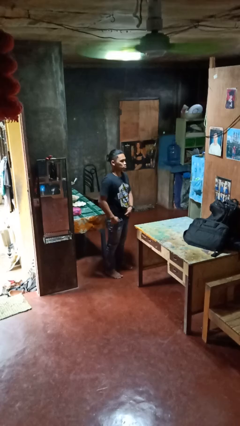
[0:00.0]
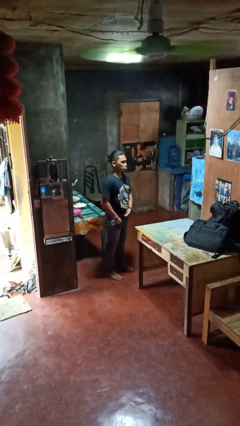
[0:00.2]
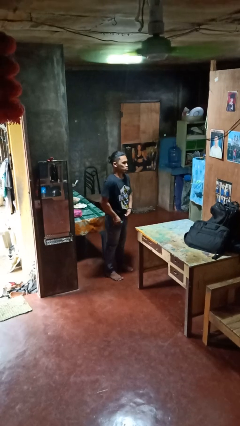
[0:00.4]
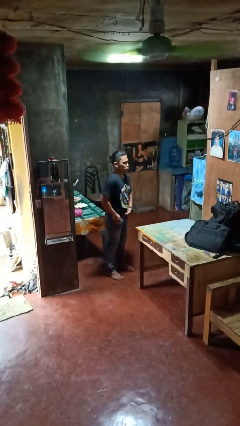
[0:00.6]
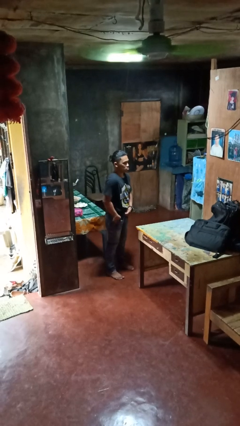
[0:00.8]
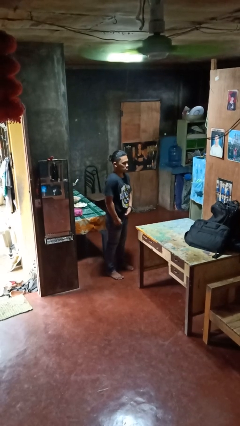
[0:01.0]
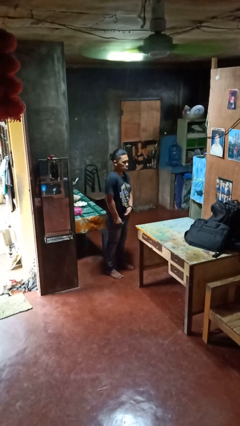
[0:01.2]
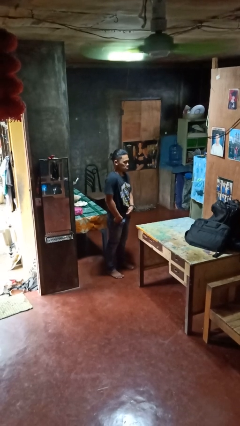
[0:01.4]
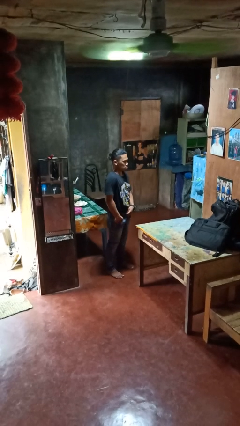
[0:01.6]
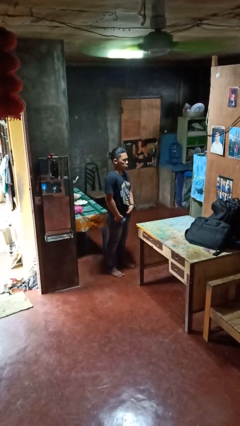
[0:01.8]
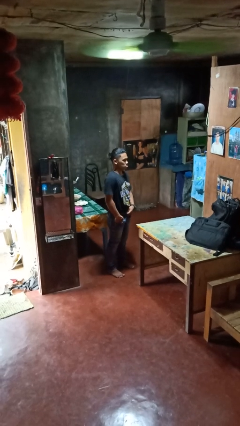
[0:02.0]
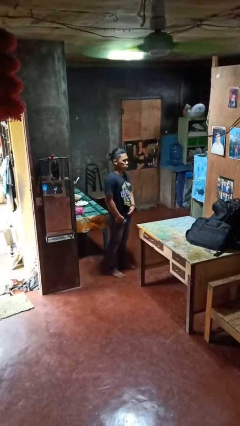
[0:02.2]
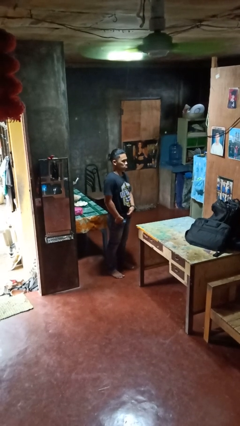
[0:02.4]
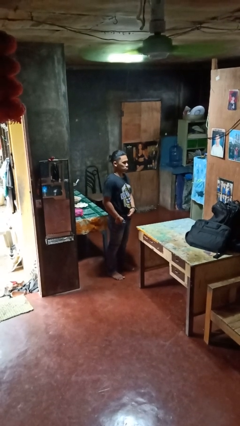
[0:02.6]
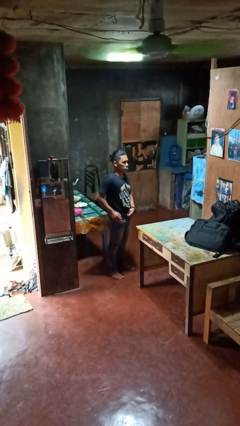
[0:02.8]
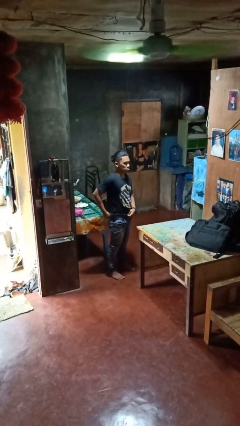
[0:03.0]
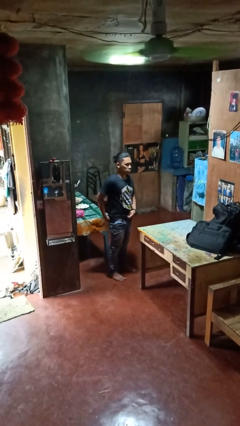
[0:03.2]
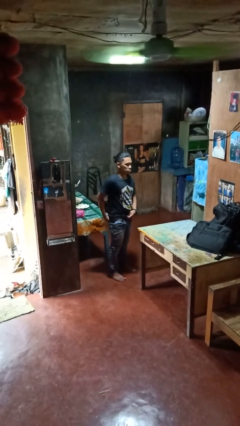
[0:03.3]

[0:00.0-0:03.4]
person puts hands in back pockets

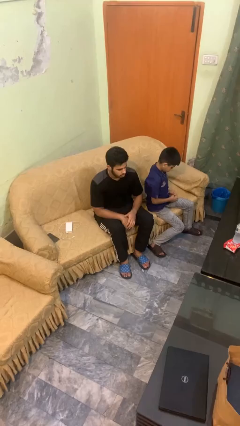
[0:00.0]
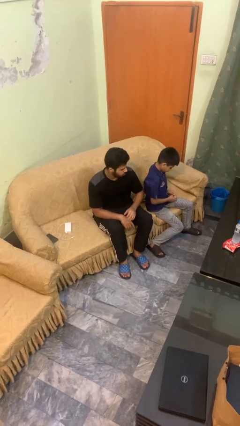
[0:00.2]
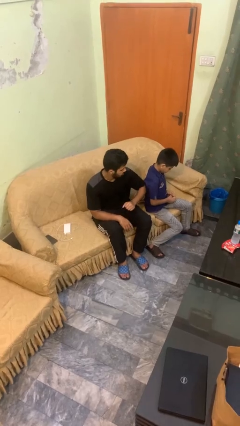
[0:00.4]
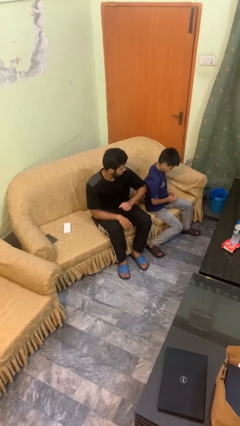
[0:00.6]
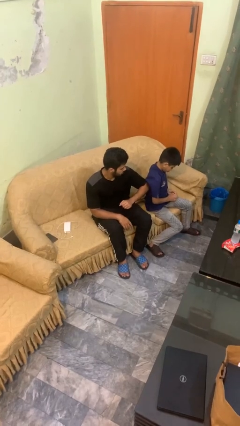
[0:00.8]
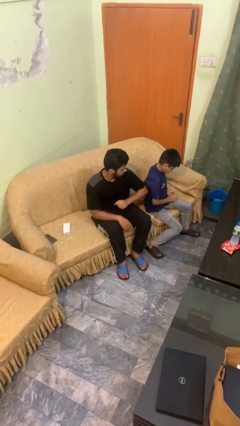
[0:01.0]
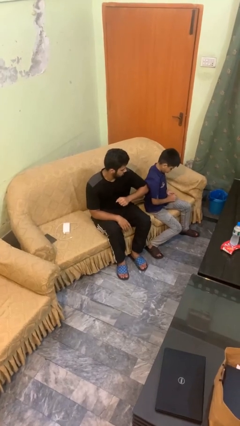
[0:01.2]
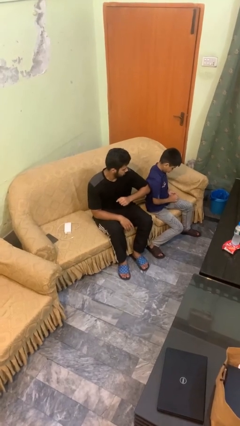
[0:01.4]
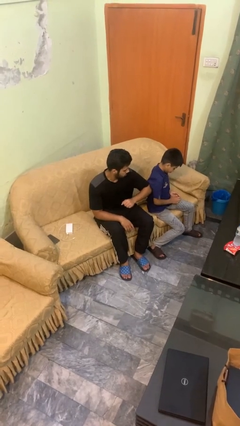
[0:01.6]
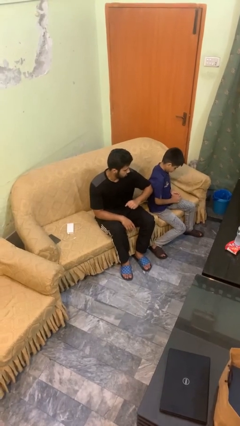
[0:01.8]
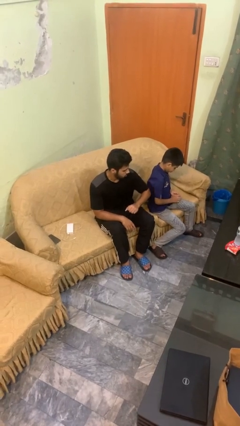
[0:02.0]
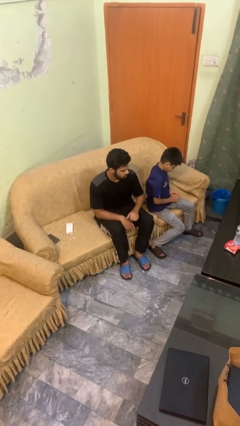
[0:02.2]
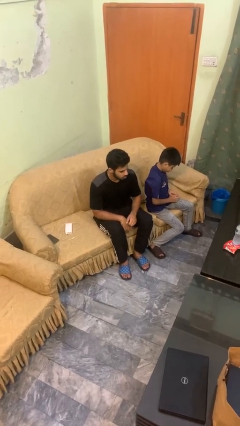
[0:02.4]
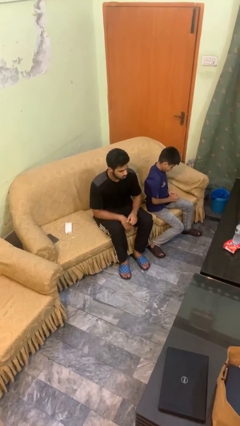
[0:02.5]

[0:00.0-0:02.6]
person nudges person with elbow

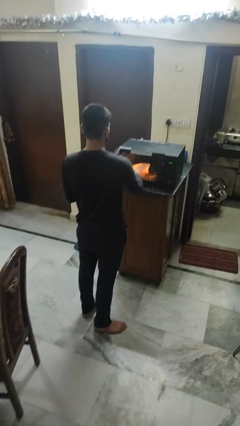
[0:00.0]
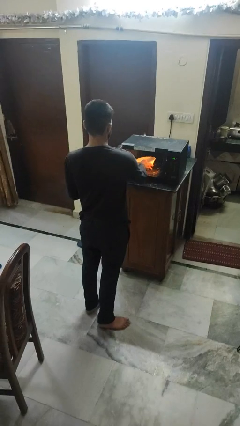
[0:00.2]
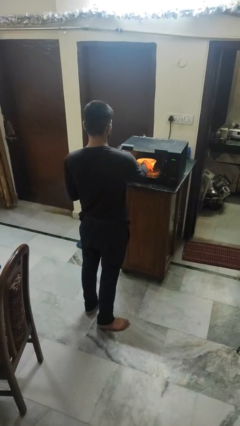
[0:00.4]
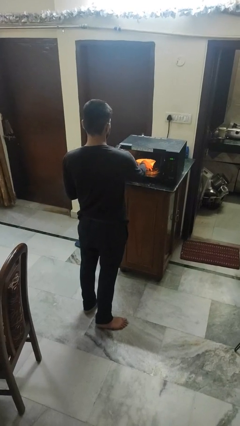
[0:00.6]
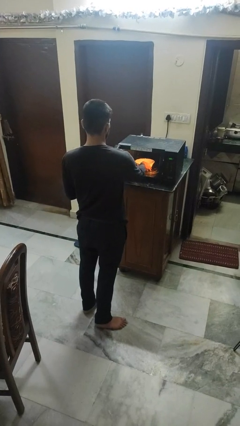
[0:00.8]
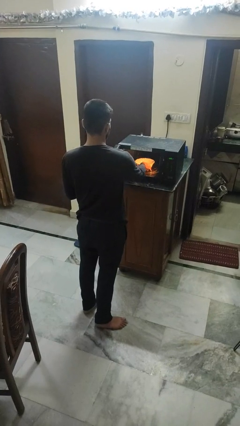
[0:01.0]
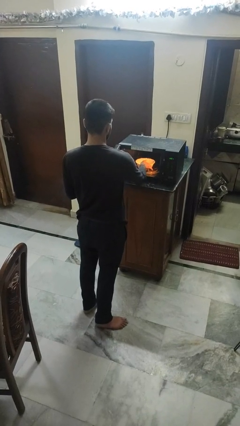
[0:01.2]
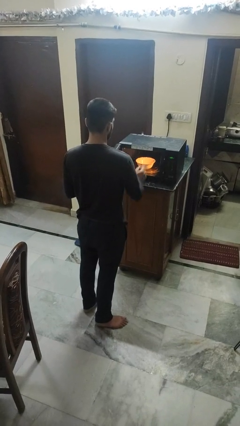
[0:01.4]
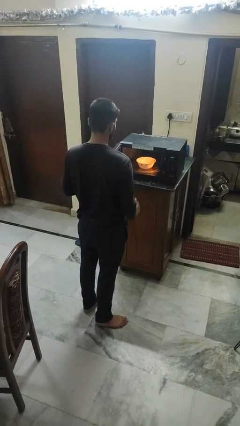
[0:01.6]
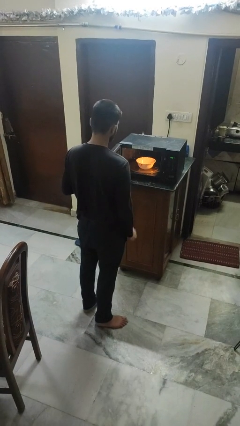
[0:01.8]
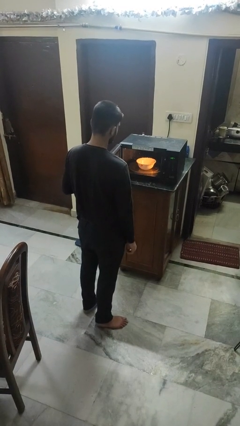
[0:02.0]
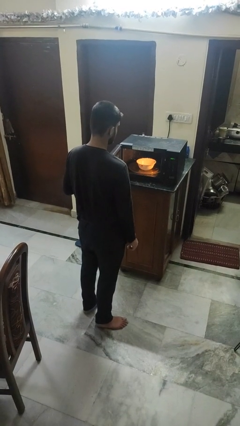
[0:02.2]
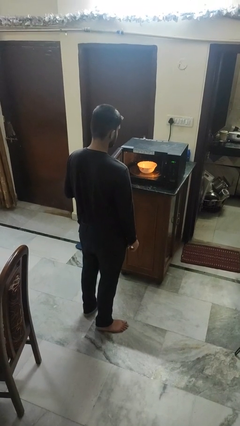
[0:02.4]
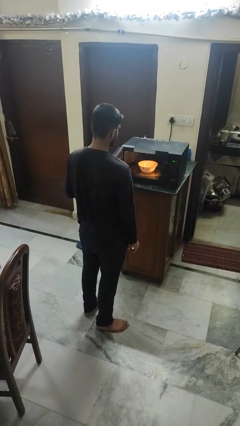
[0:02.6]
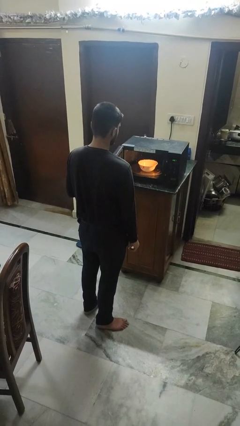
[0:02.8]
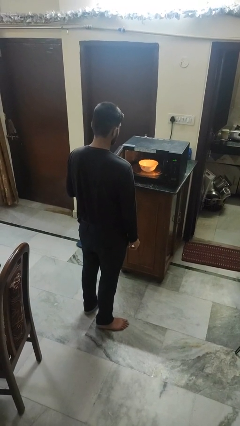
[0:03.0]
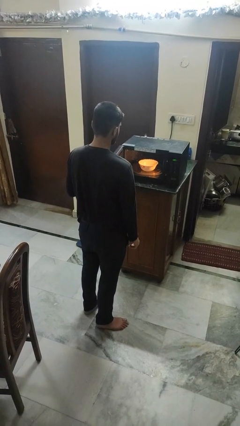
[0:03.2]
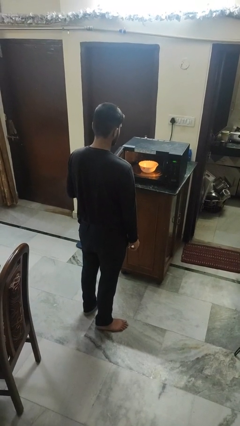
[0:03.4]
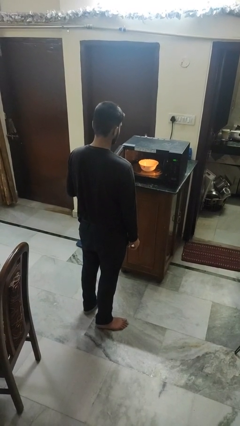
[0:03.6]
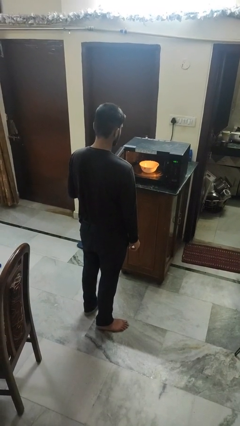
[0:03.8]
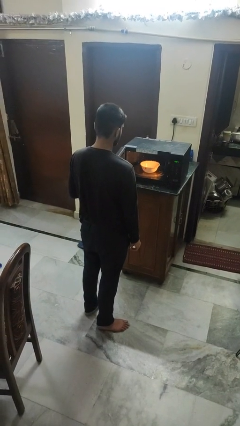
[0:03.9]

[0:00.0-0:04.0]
person puts object into oven

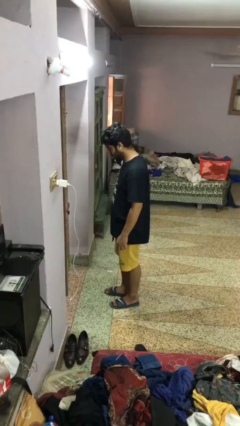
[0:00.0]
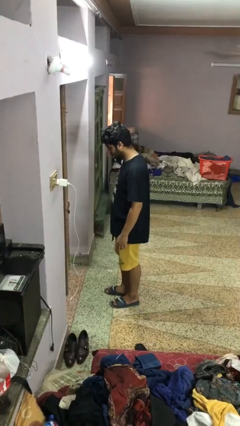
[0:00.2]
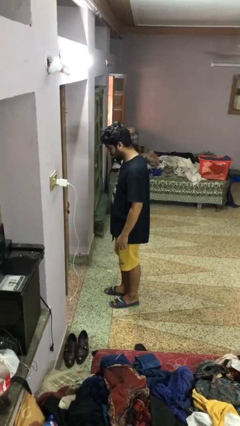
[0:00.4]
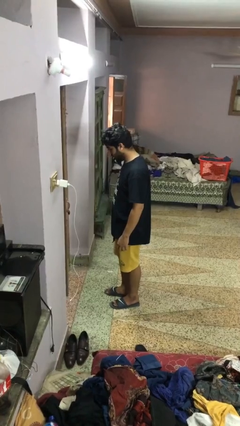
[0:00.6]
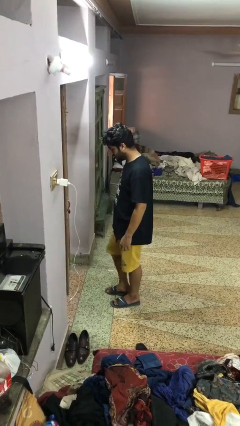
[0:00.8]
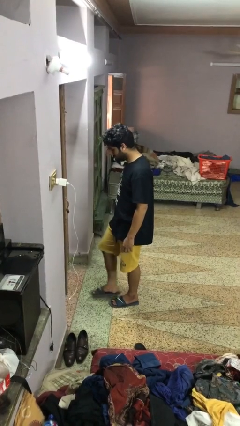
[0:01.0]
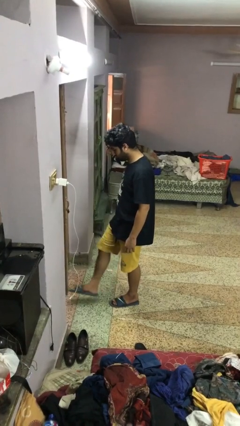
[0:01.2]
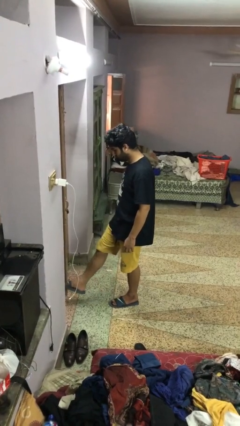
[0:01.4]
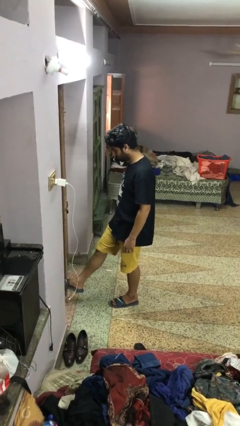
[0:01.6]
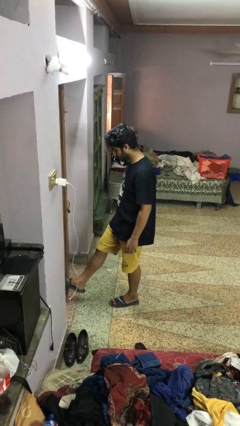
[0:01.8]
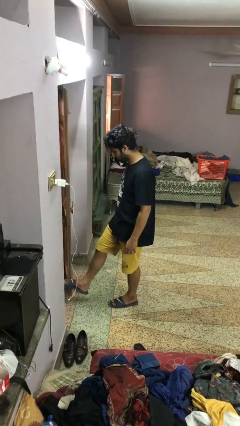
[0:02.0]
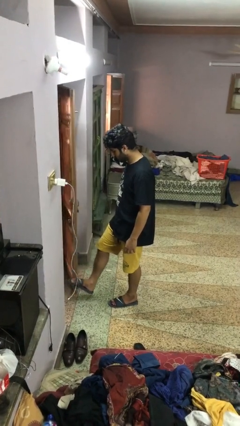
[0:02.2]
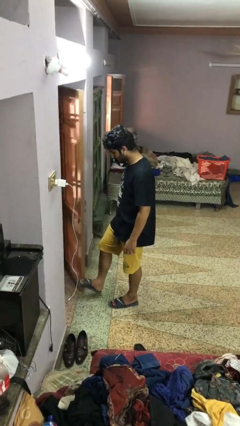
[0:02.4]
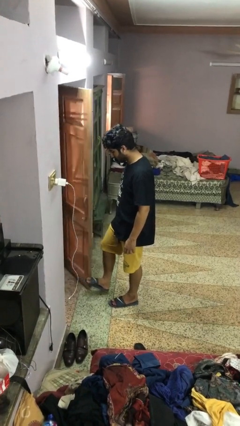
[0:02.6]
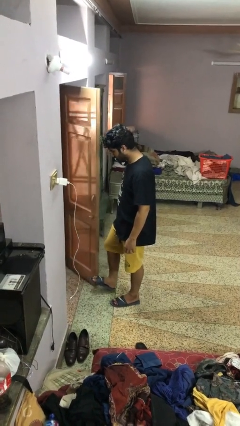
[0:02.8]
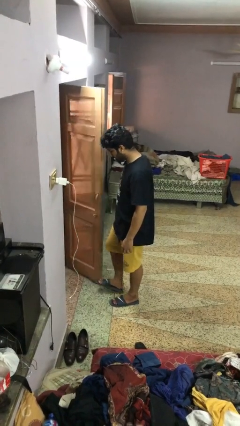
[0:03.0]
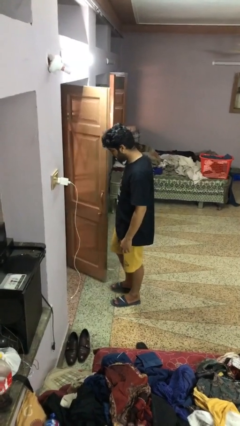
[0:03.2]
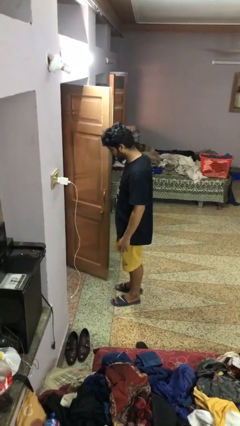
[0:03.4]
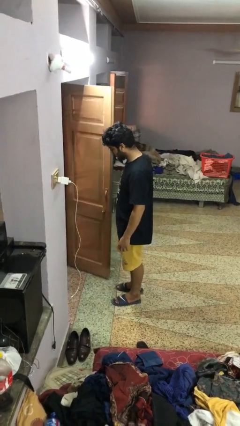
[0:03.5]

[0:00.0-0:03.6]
person opens facility door

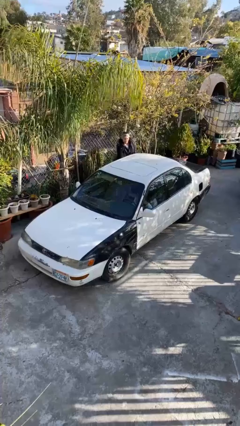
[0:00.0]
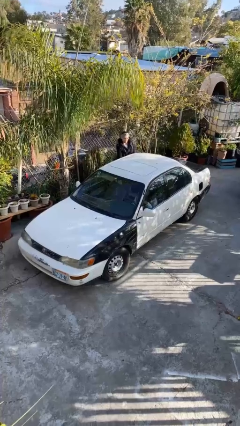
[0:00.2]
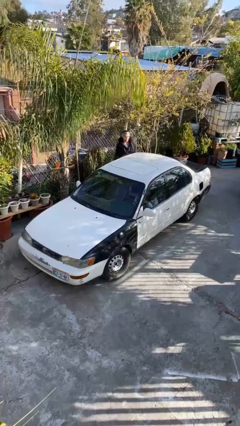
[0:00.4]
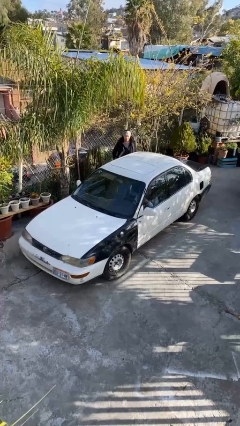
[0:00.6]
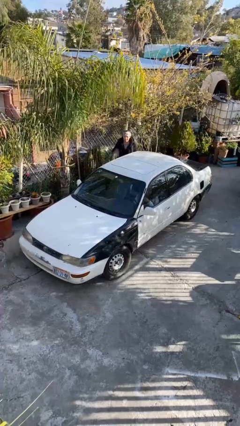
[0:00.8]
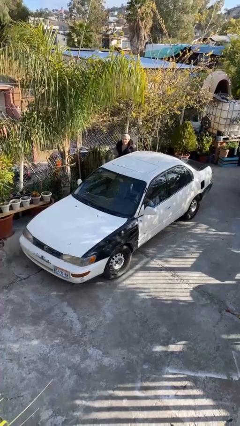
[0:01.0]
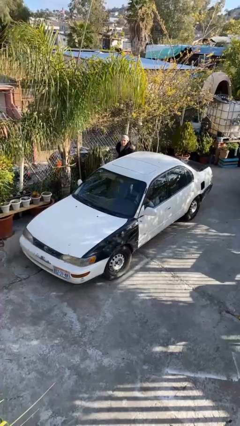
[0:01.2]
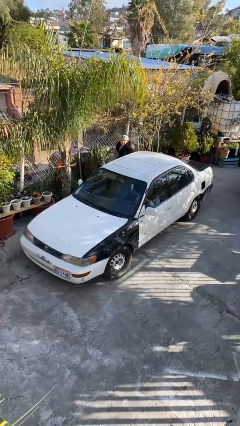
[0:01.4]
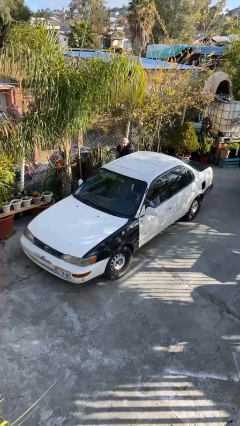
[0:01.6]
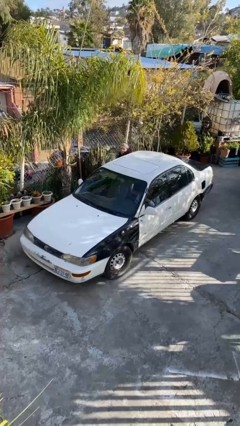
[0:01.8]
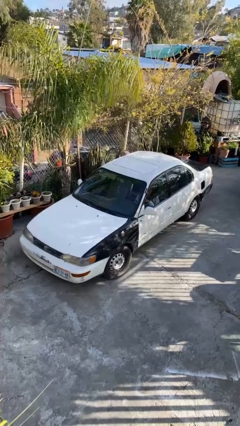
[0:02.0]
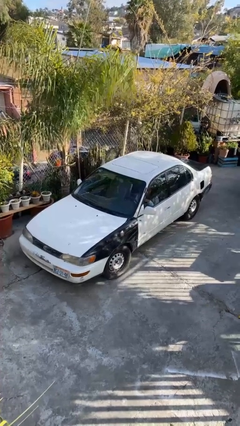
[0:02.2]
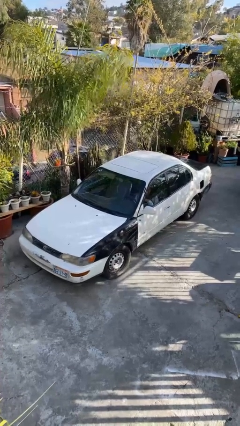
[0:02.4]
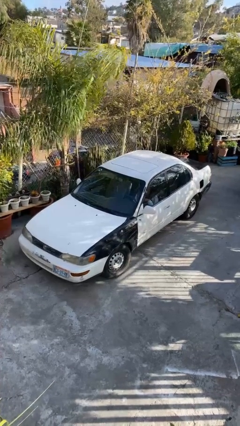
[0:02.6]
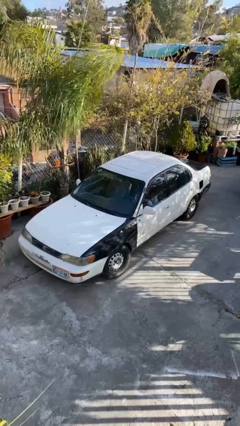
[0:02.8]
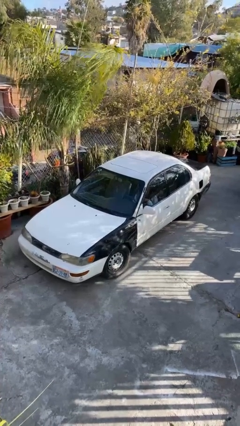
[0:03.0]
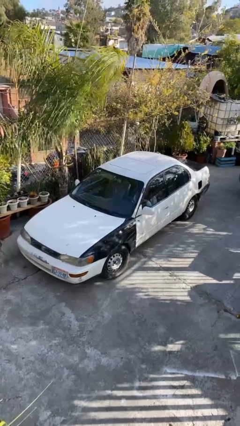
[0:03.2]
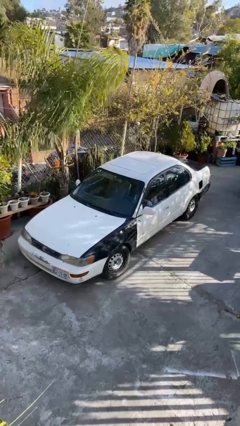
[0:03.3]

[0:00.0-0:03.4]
car picks up person

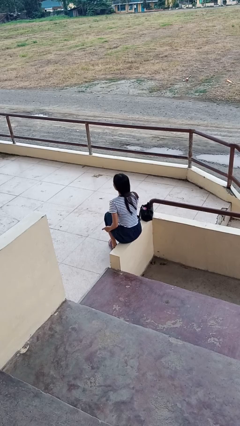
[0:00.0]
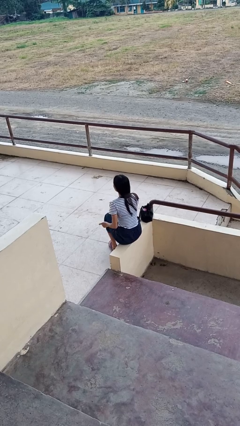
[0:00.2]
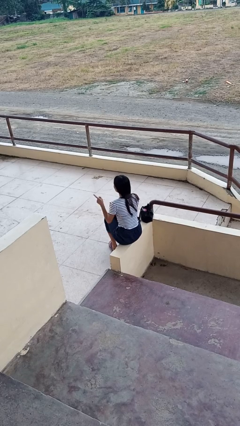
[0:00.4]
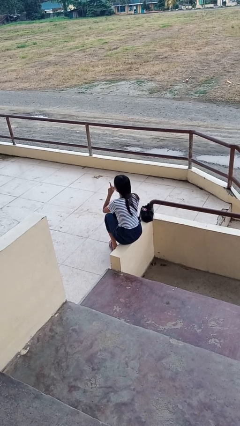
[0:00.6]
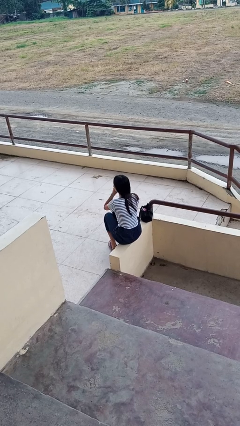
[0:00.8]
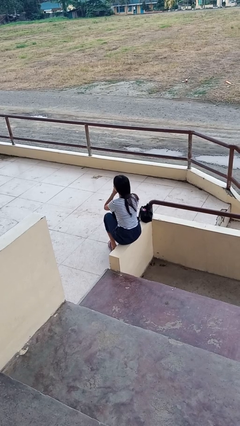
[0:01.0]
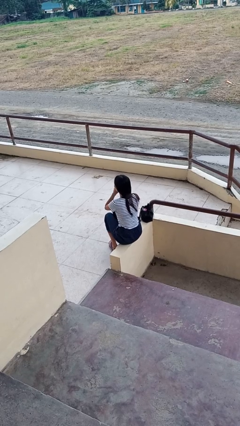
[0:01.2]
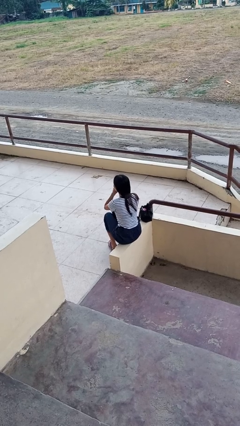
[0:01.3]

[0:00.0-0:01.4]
person gestures be quiet
